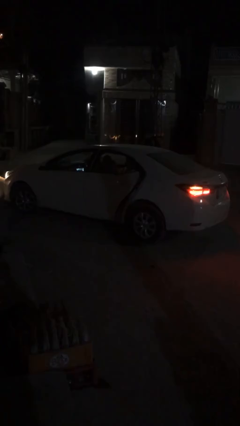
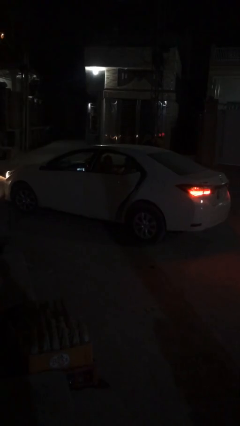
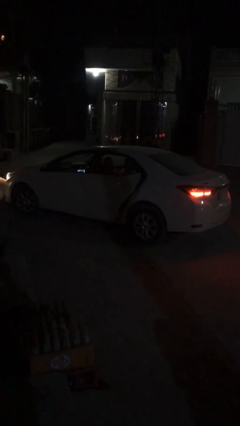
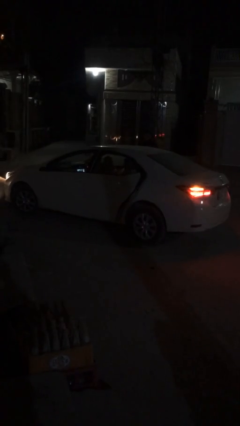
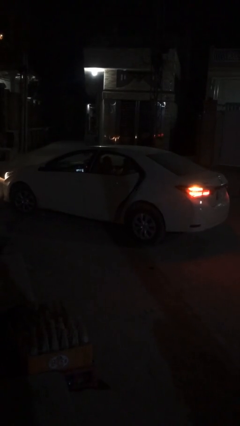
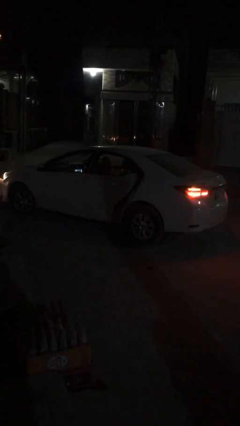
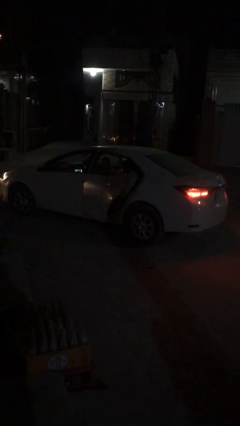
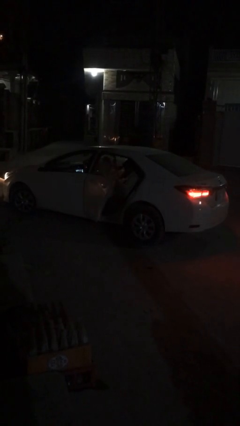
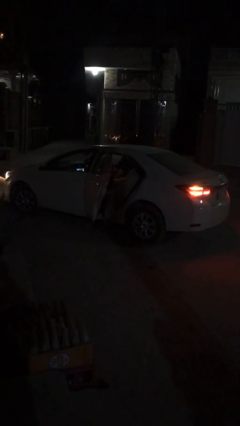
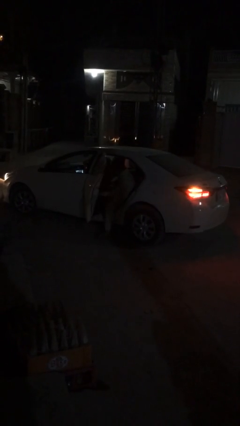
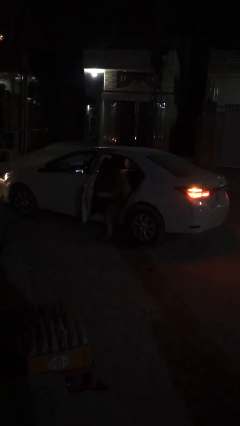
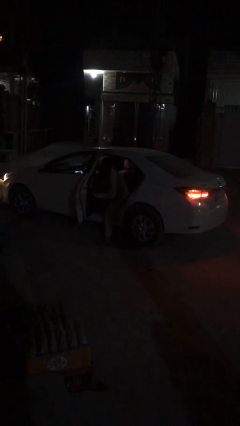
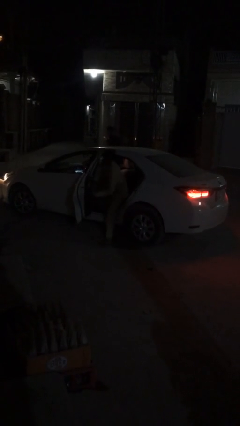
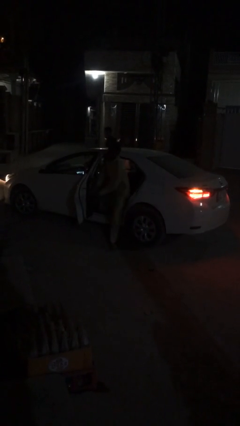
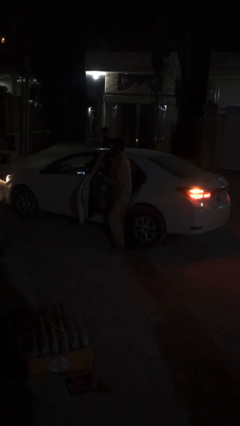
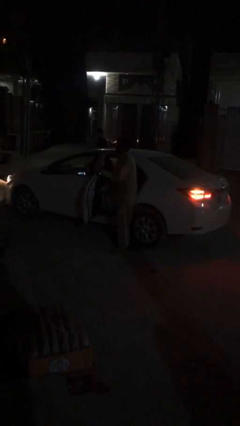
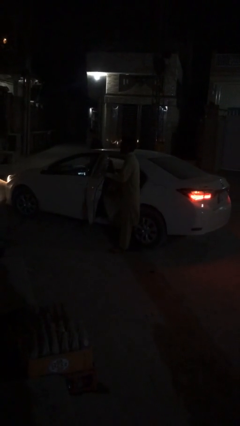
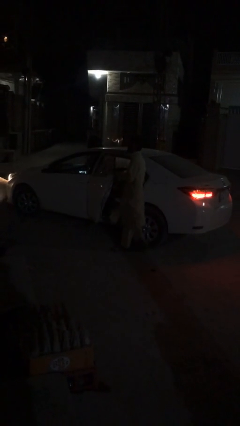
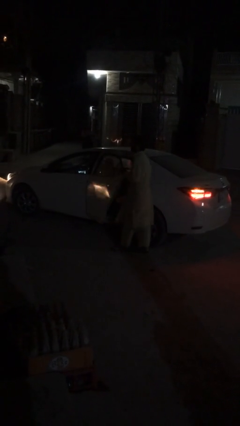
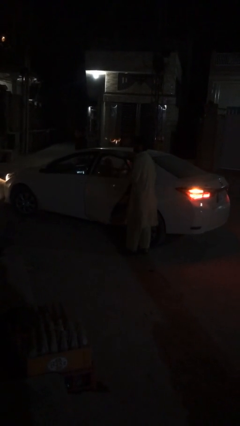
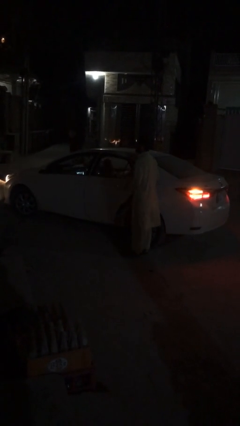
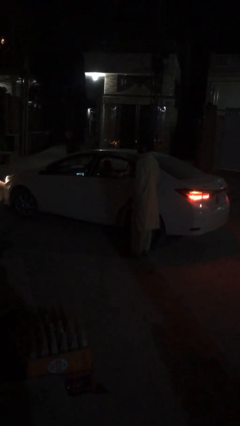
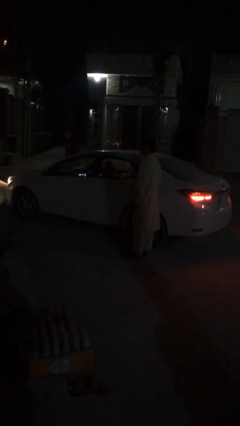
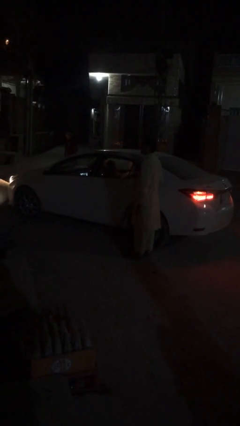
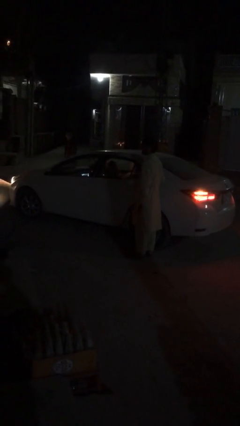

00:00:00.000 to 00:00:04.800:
car drops off person

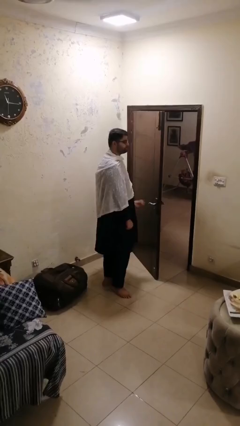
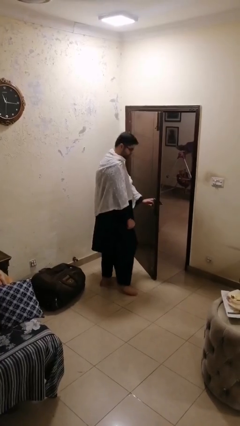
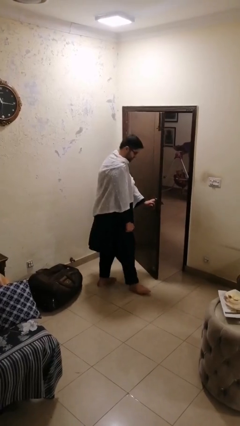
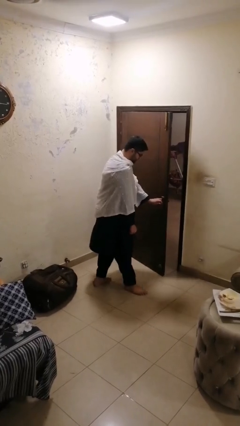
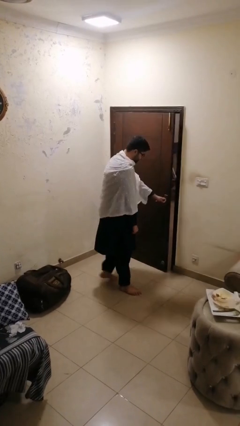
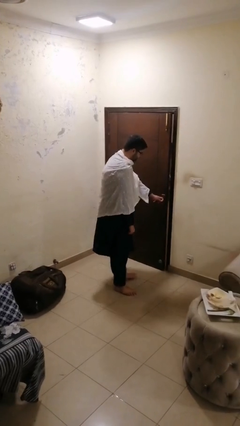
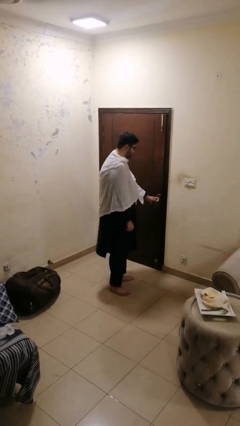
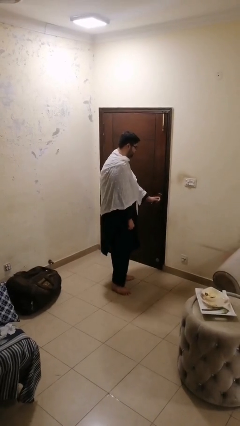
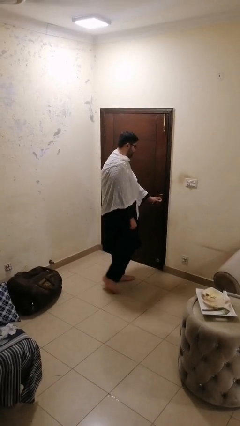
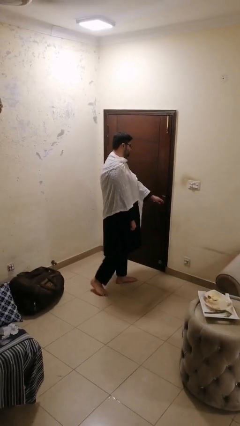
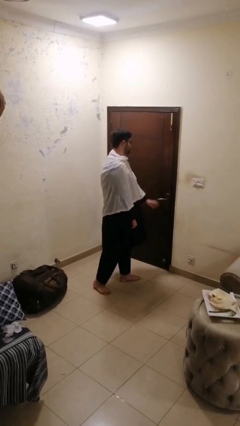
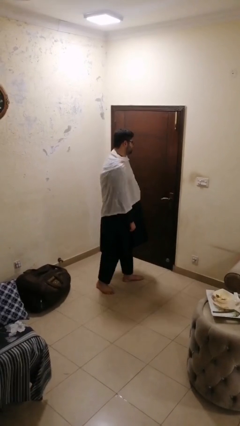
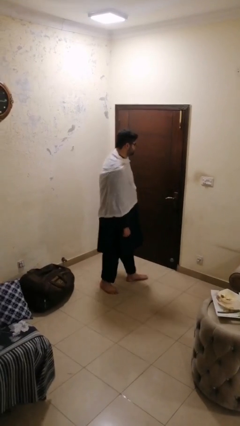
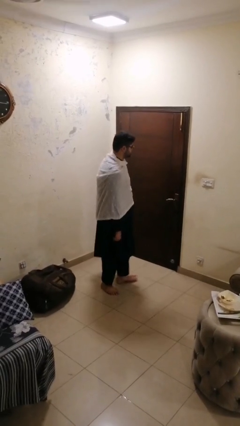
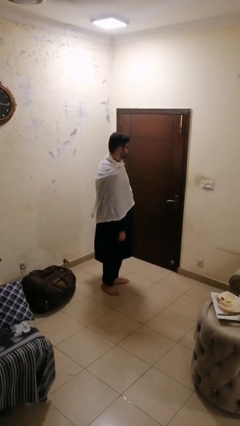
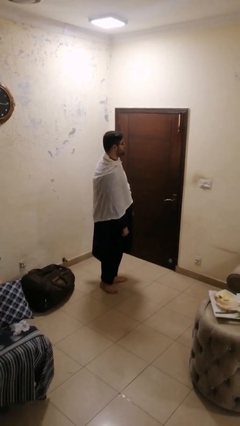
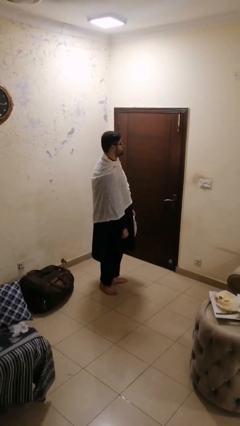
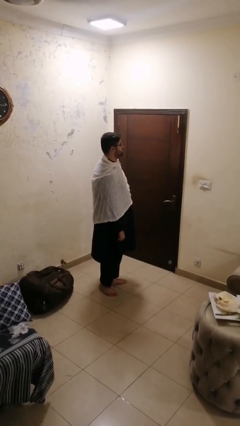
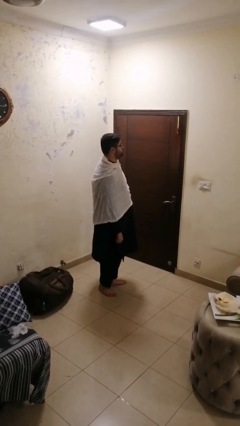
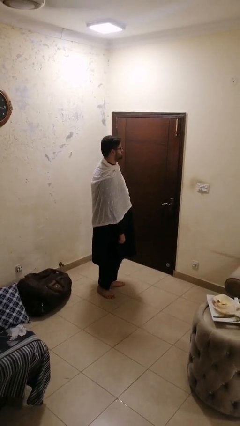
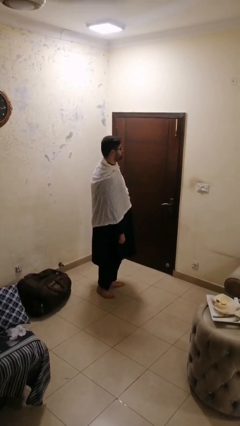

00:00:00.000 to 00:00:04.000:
person closes facility door

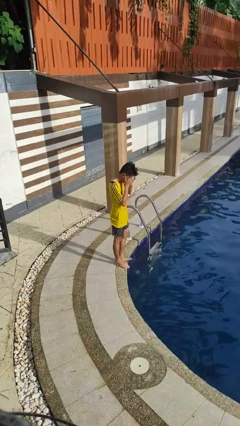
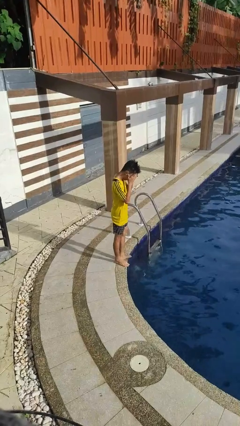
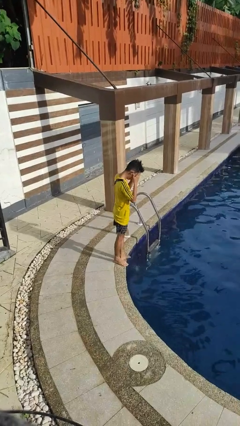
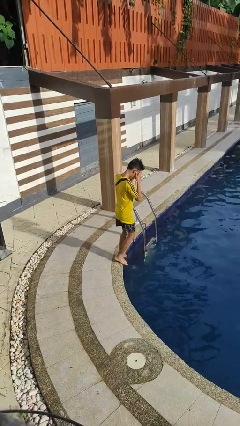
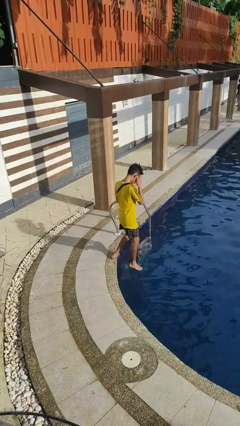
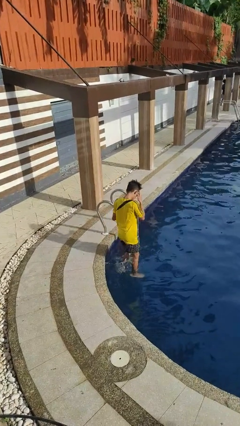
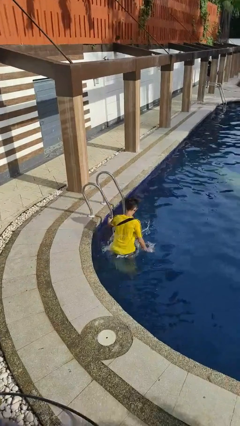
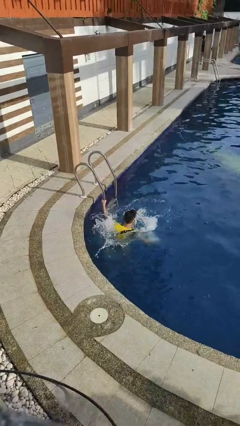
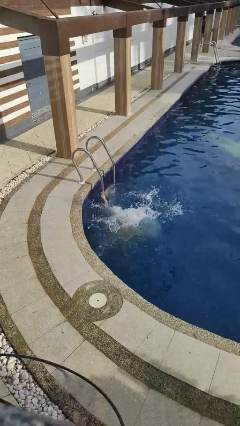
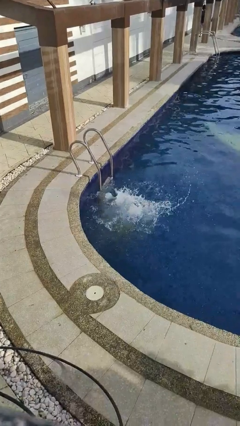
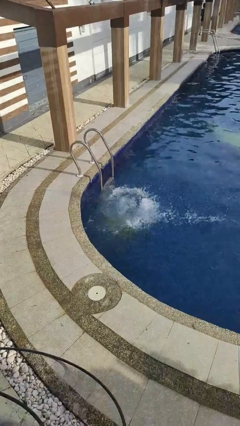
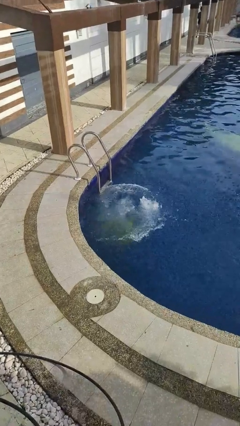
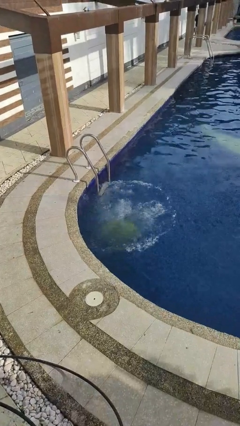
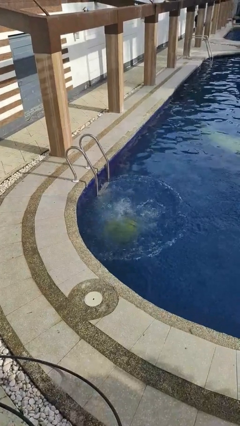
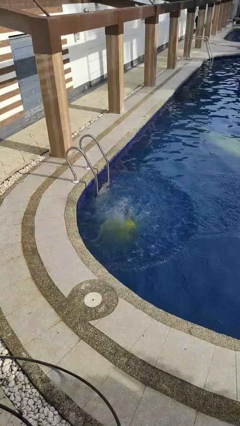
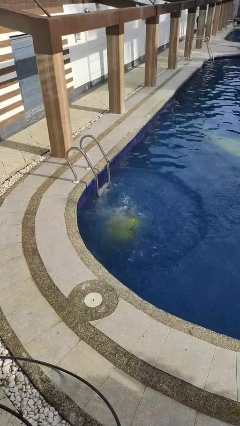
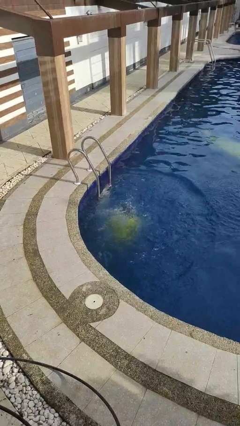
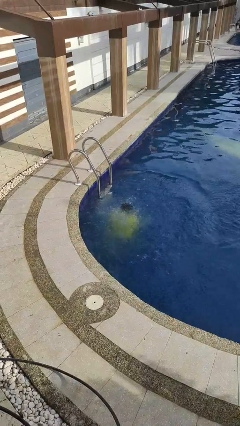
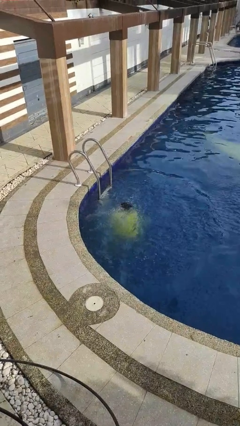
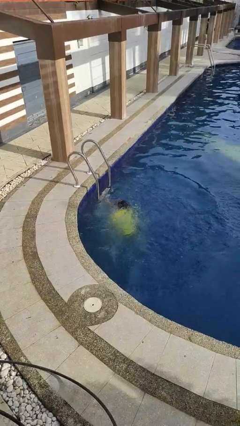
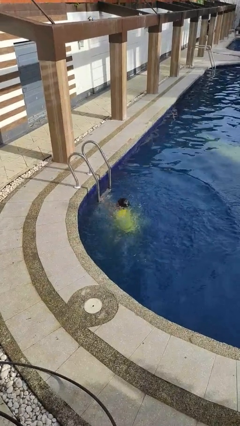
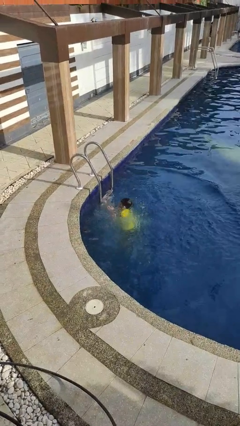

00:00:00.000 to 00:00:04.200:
person falls into pool

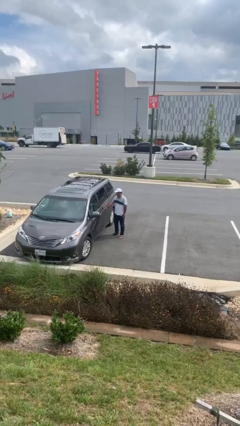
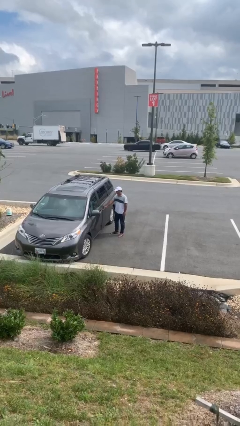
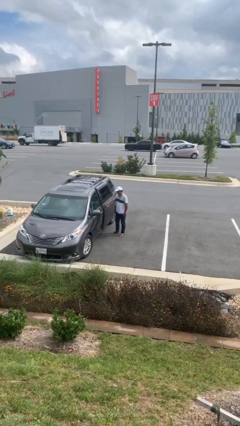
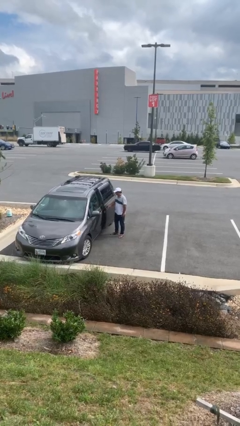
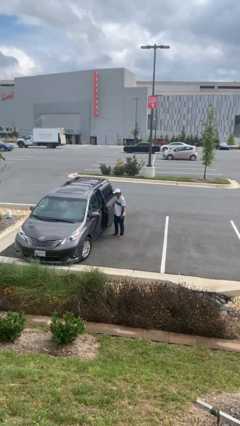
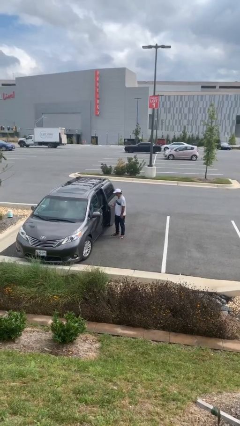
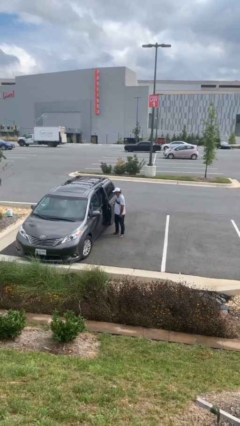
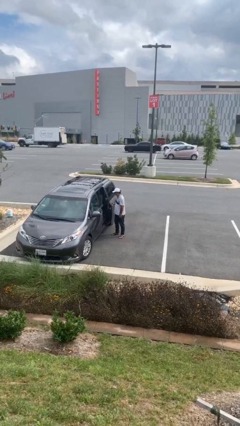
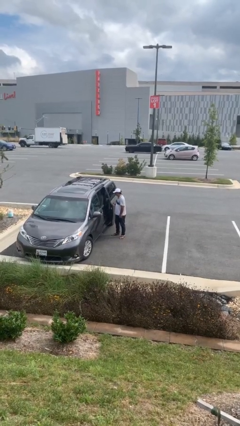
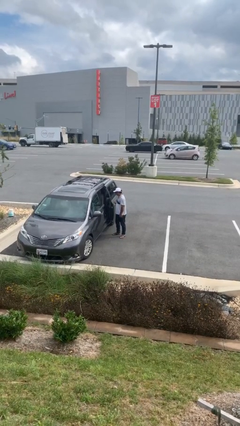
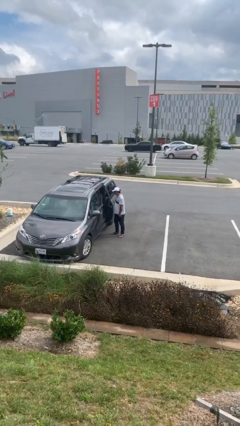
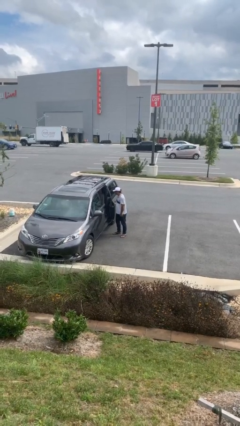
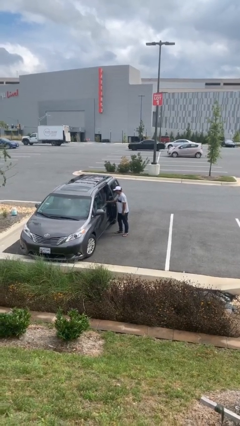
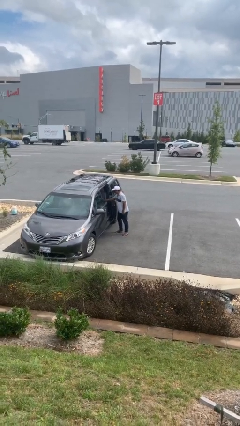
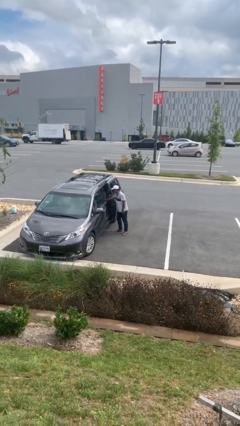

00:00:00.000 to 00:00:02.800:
person opens car door

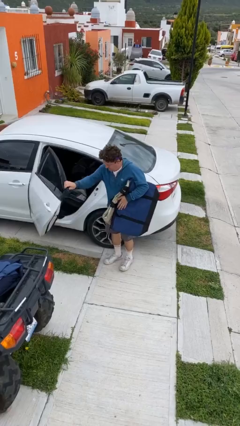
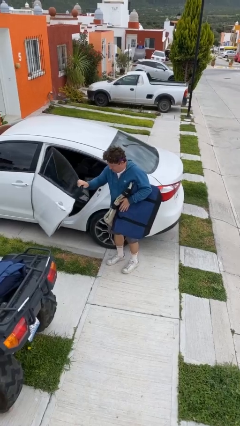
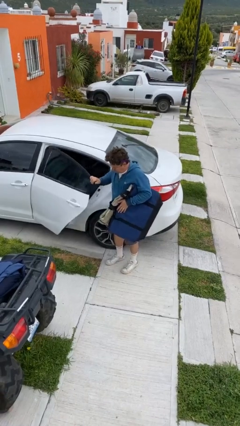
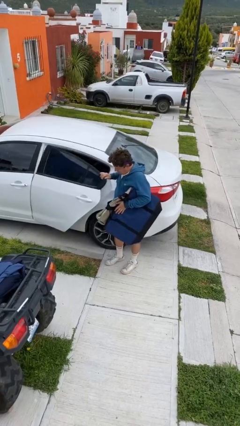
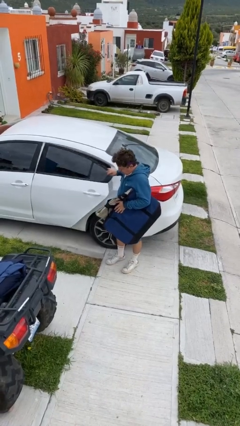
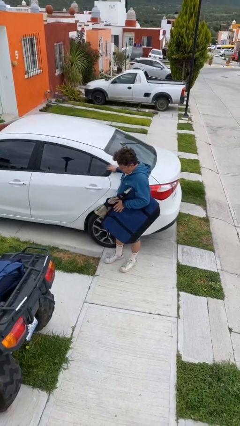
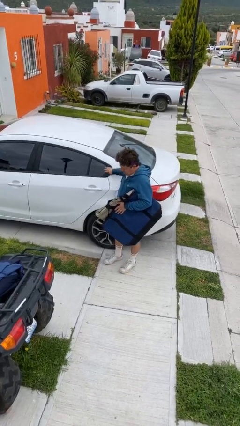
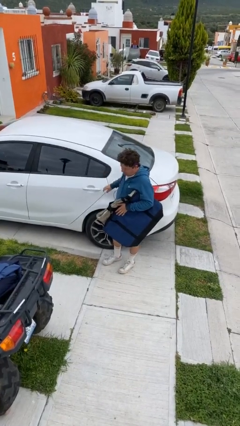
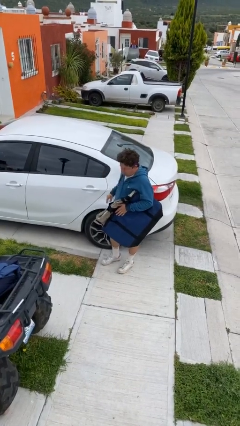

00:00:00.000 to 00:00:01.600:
person closes car door
